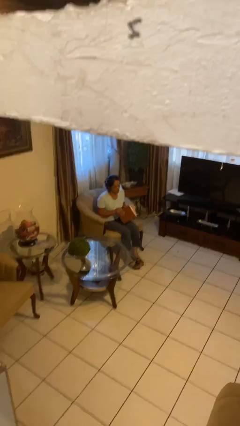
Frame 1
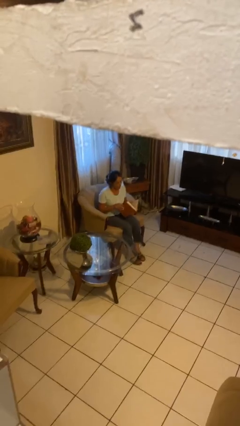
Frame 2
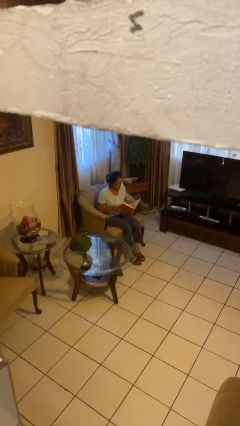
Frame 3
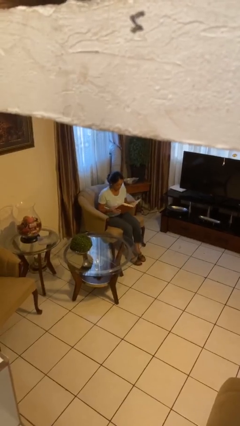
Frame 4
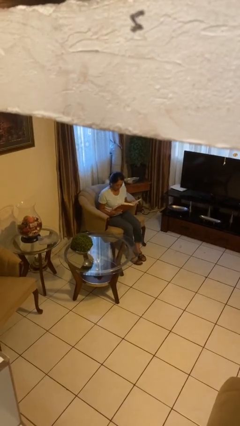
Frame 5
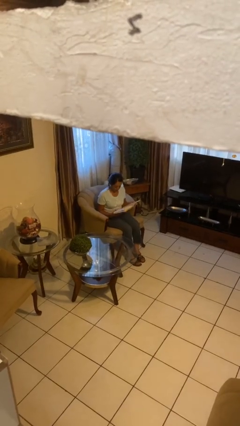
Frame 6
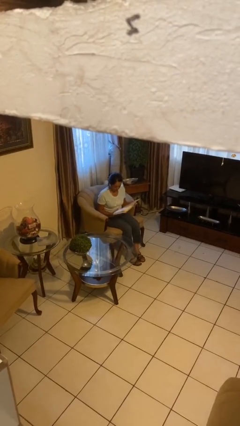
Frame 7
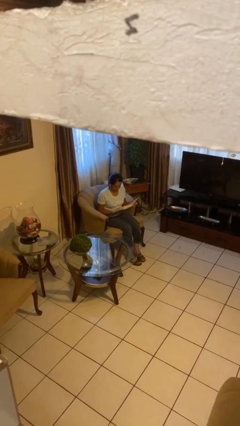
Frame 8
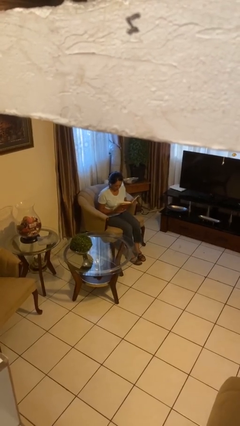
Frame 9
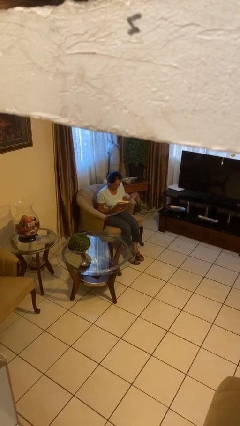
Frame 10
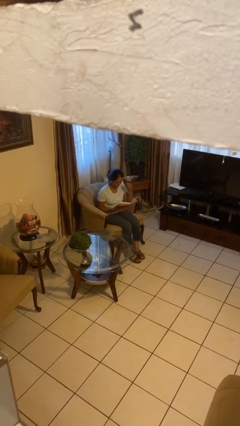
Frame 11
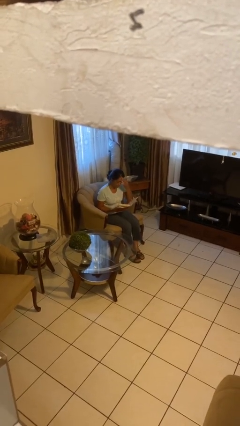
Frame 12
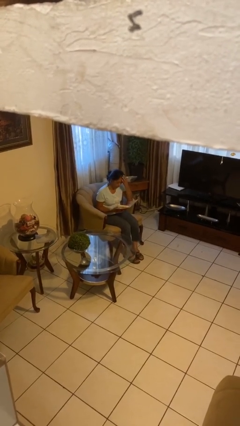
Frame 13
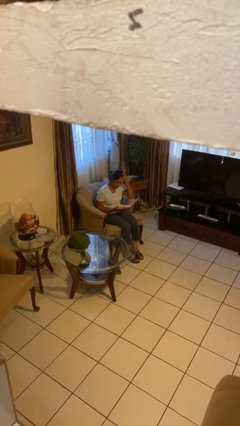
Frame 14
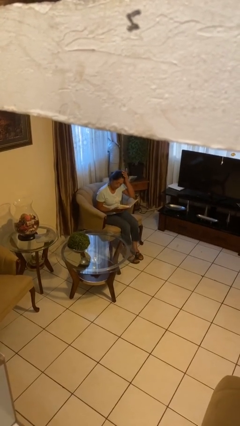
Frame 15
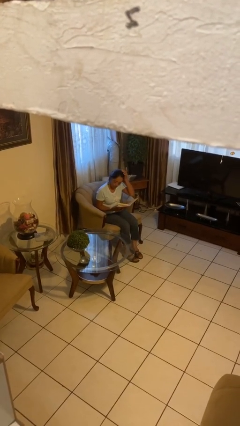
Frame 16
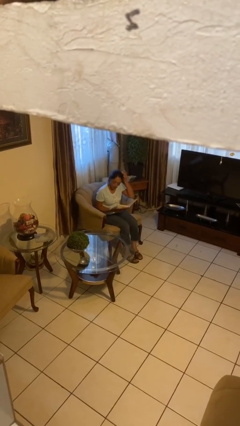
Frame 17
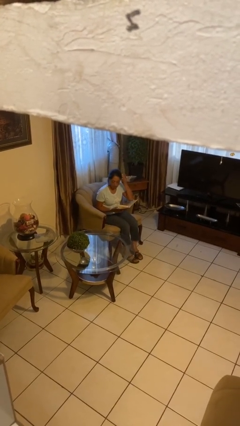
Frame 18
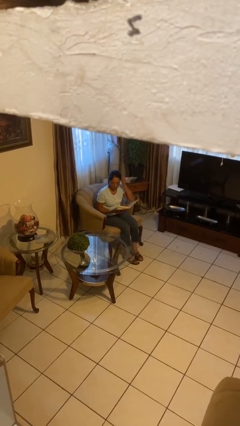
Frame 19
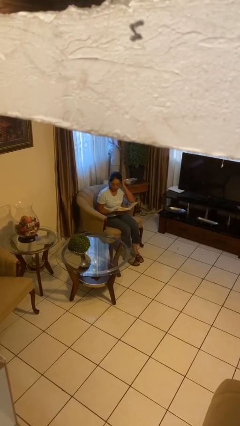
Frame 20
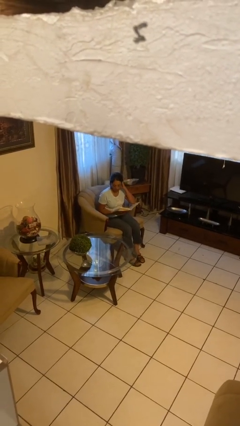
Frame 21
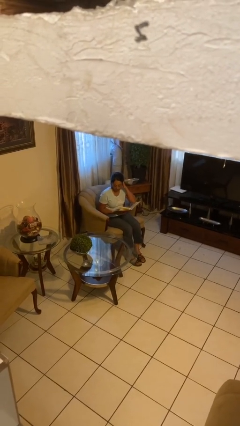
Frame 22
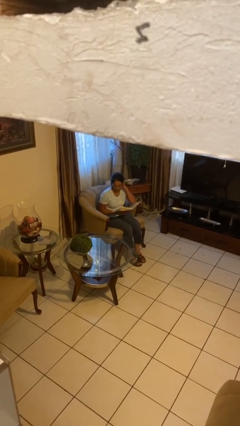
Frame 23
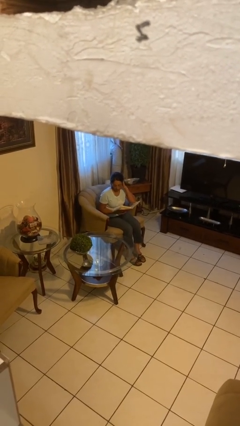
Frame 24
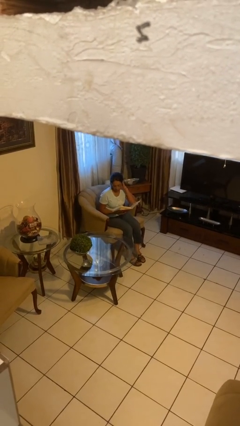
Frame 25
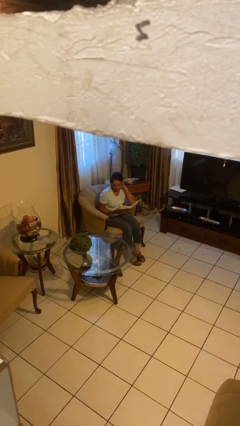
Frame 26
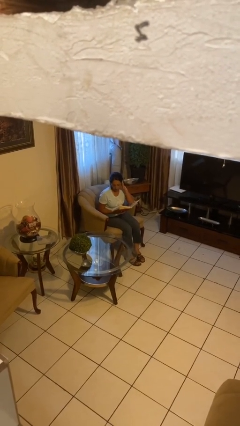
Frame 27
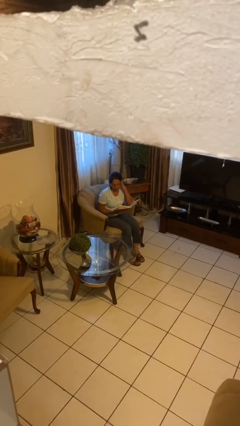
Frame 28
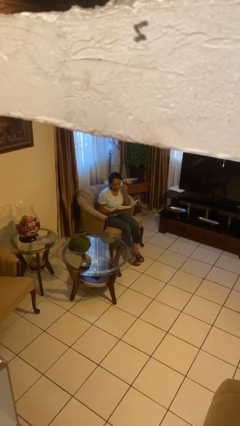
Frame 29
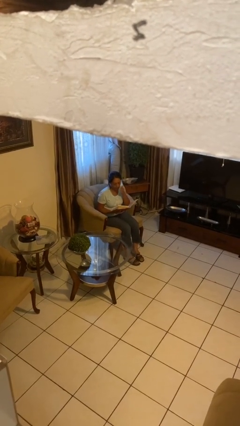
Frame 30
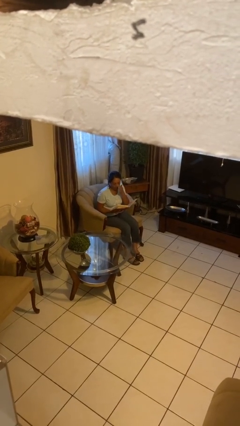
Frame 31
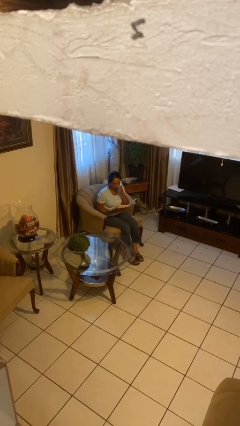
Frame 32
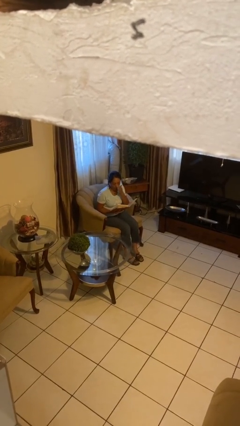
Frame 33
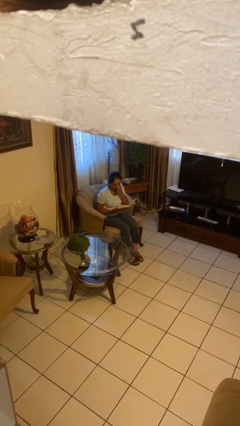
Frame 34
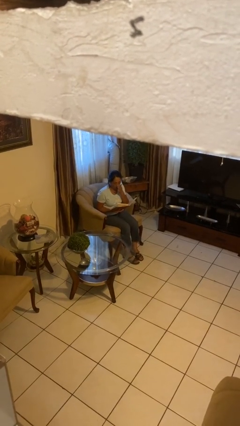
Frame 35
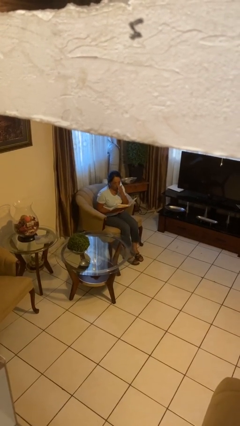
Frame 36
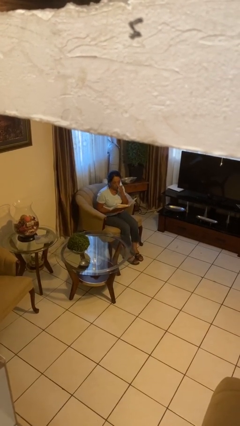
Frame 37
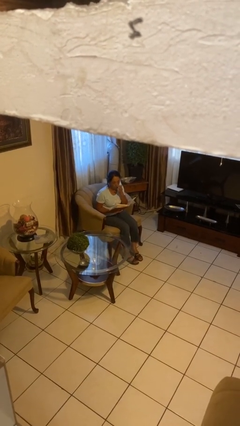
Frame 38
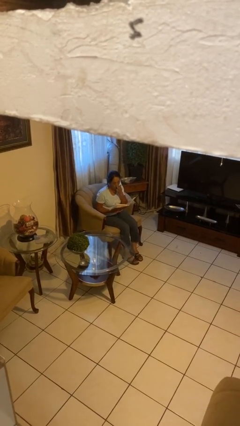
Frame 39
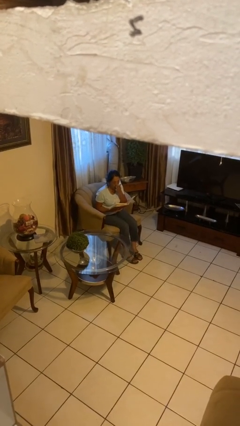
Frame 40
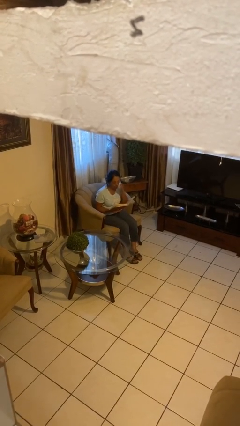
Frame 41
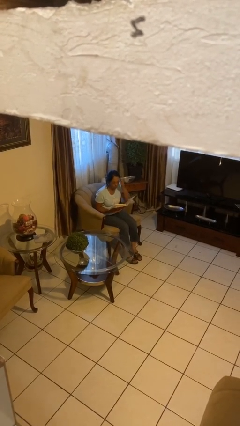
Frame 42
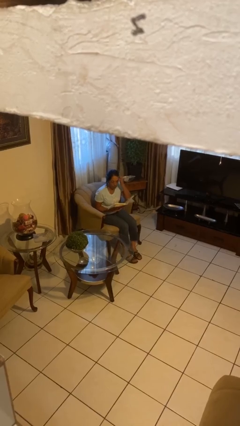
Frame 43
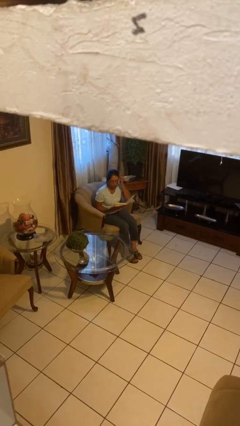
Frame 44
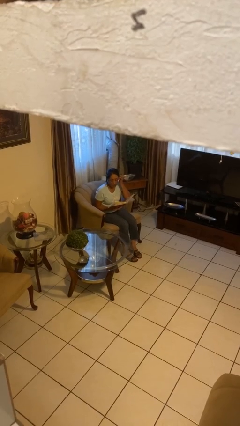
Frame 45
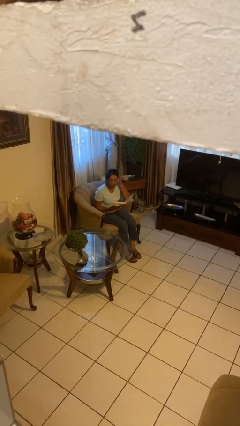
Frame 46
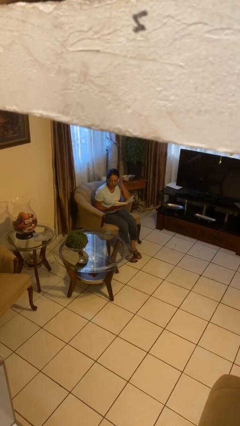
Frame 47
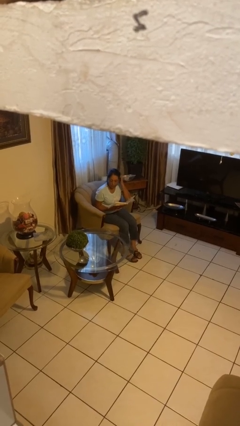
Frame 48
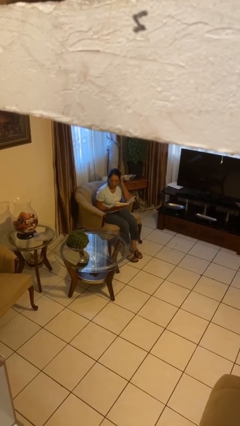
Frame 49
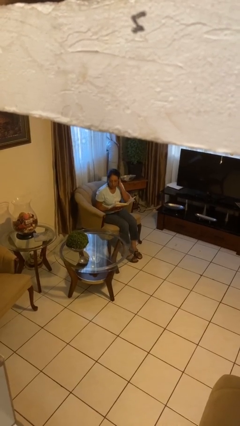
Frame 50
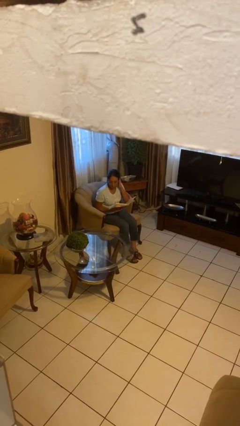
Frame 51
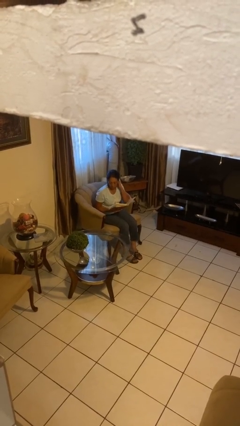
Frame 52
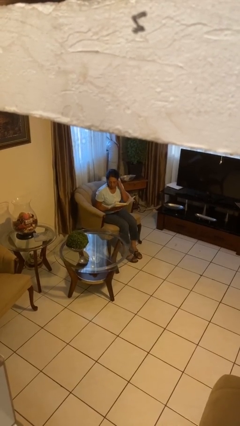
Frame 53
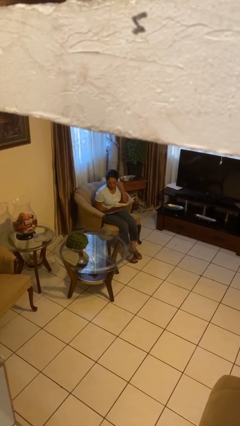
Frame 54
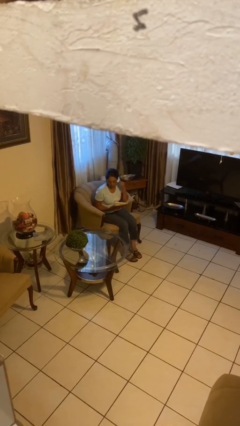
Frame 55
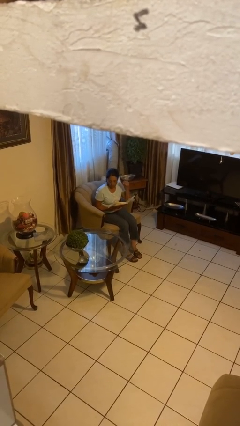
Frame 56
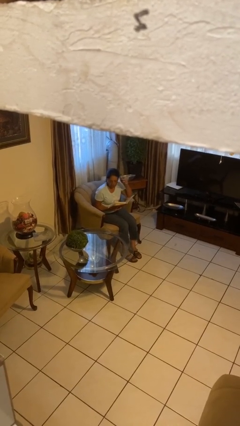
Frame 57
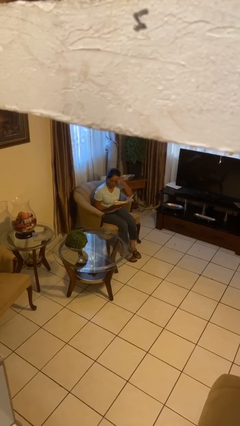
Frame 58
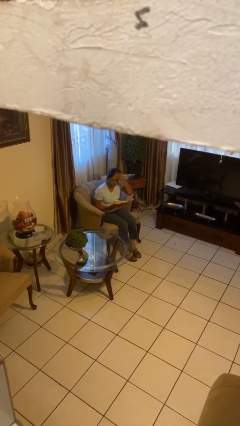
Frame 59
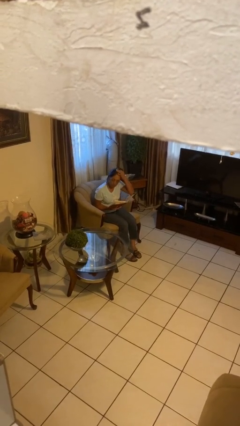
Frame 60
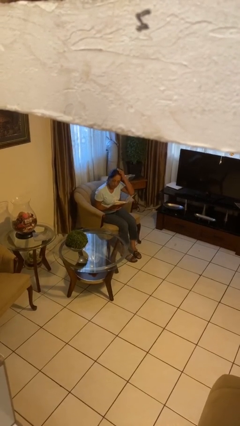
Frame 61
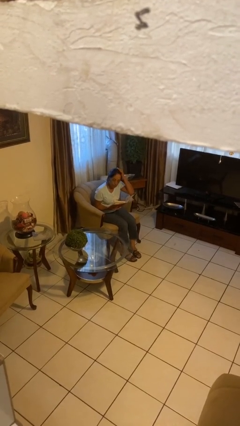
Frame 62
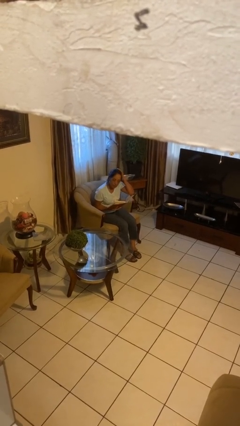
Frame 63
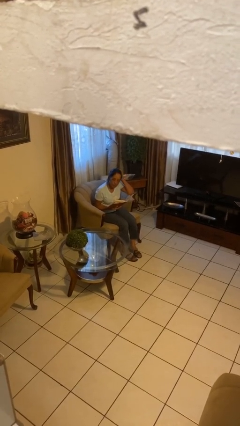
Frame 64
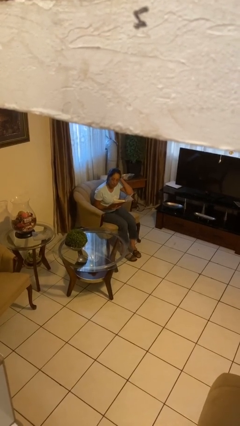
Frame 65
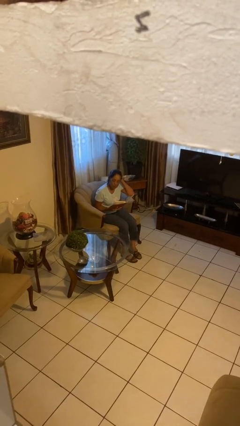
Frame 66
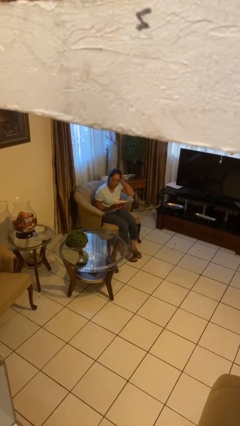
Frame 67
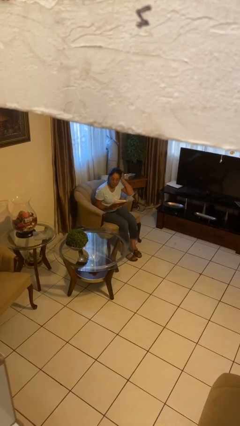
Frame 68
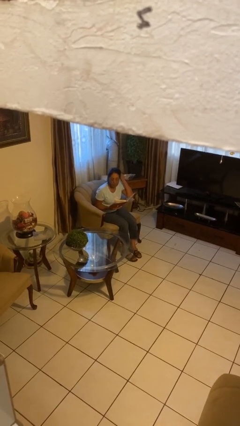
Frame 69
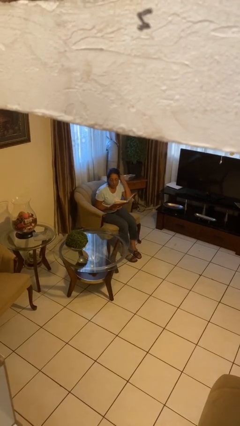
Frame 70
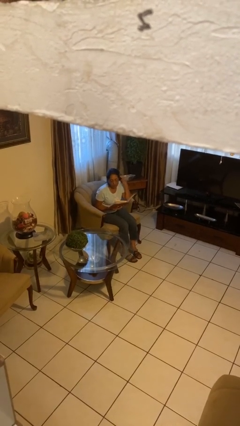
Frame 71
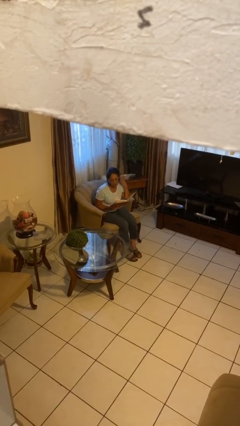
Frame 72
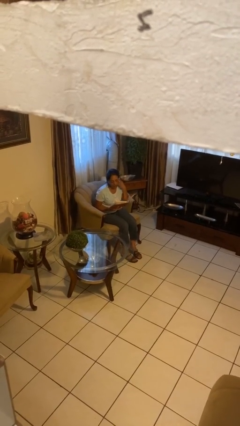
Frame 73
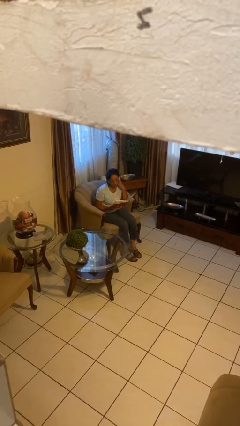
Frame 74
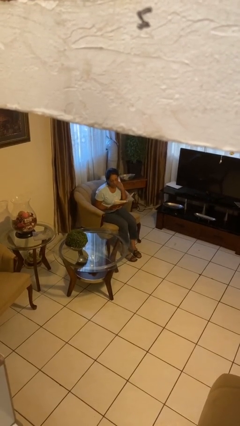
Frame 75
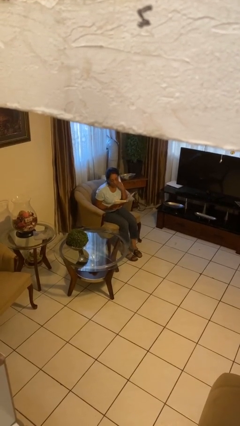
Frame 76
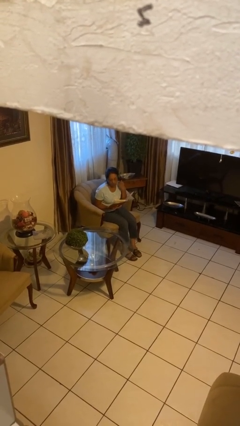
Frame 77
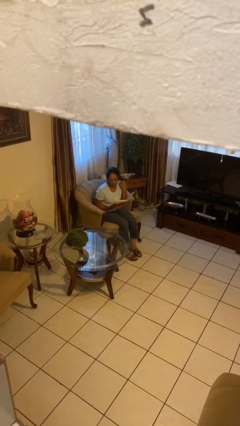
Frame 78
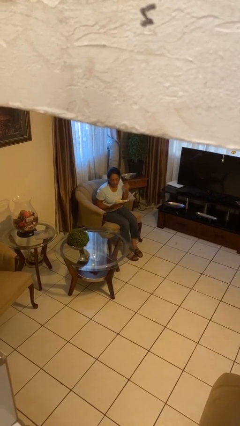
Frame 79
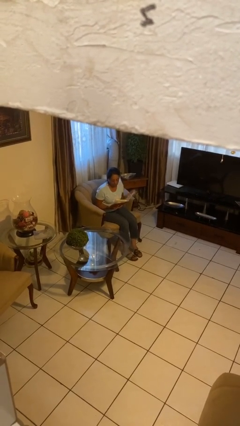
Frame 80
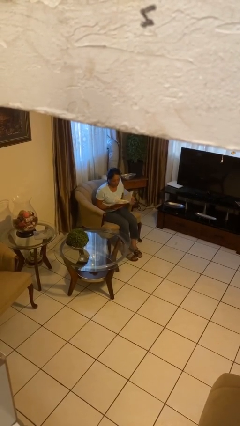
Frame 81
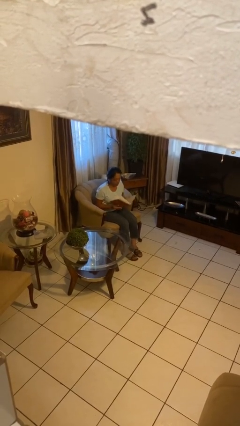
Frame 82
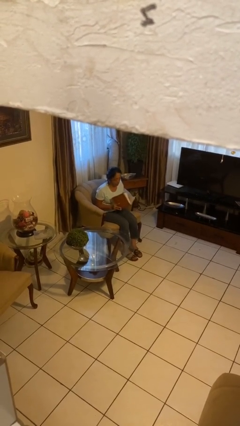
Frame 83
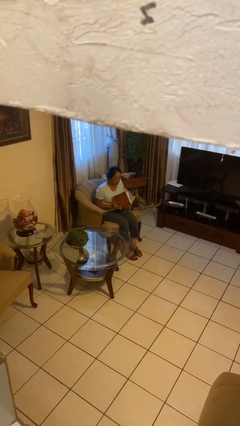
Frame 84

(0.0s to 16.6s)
person reads document

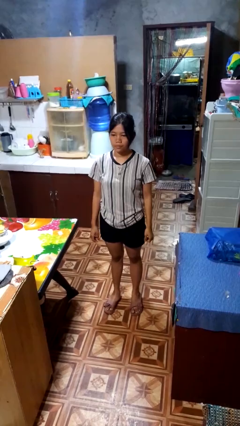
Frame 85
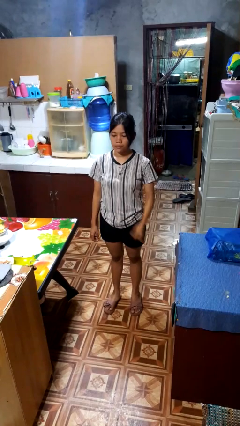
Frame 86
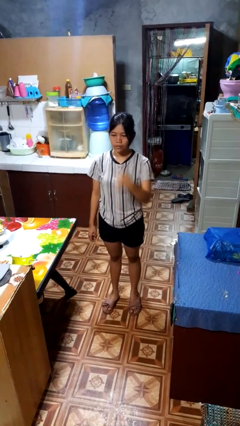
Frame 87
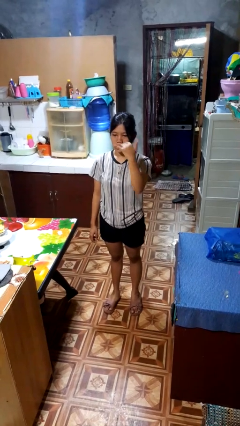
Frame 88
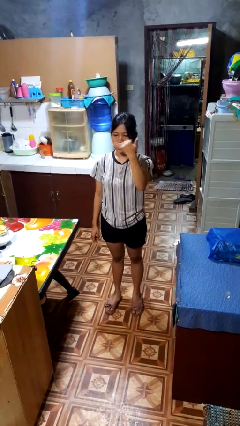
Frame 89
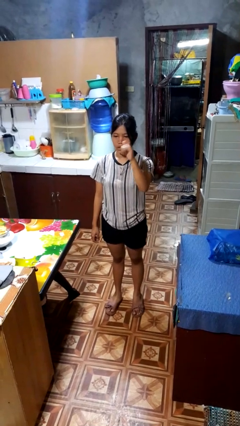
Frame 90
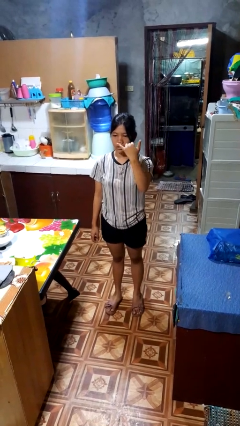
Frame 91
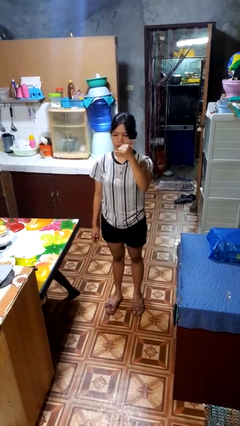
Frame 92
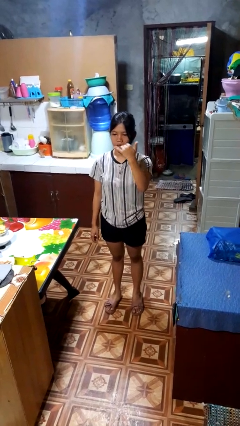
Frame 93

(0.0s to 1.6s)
person gestures hang loose
